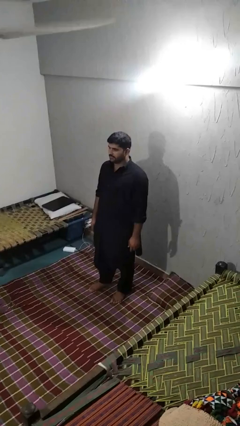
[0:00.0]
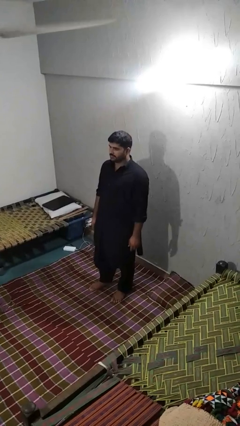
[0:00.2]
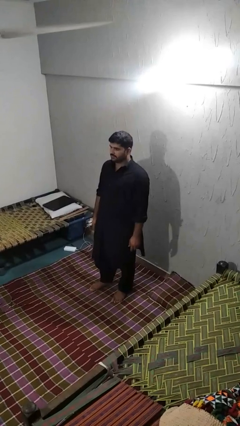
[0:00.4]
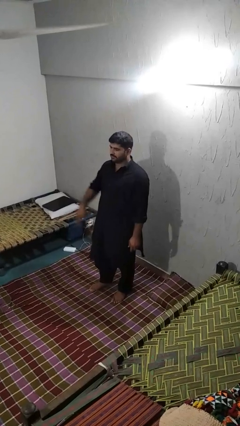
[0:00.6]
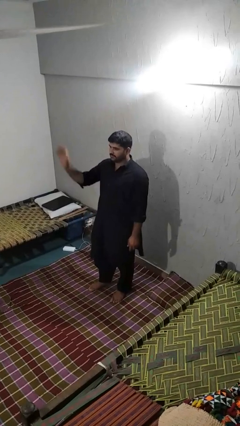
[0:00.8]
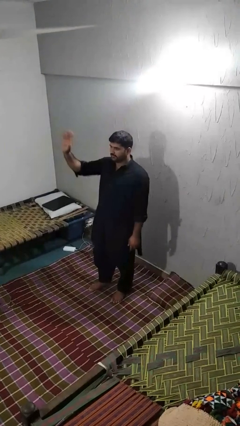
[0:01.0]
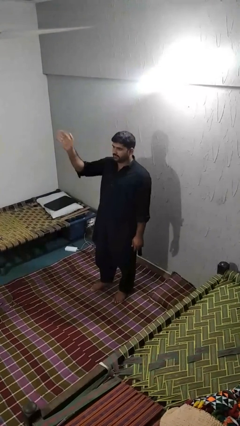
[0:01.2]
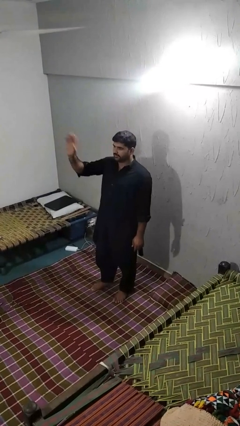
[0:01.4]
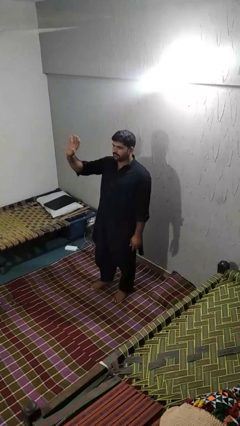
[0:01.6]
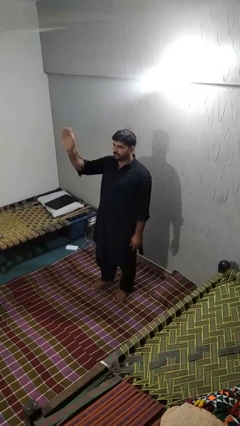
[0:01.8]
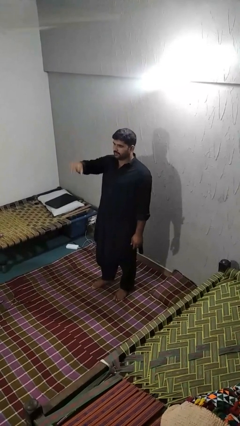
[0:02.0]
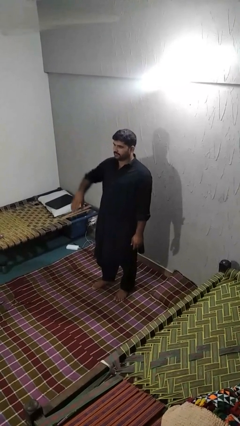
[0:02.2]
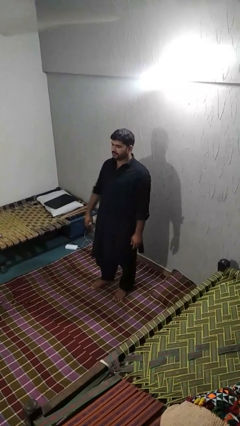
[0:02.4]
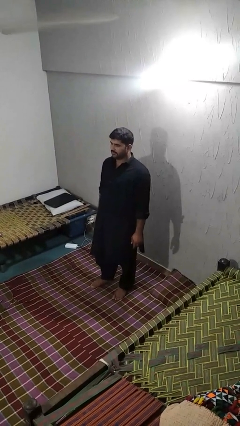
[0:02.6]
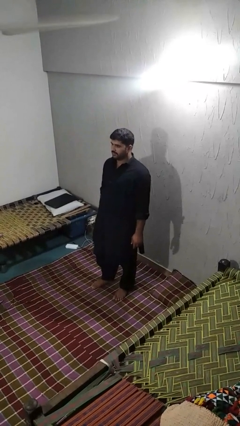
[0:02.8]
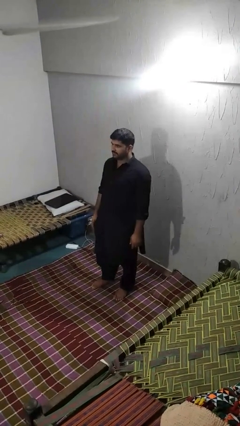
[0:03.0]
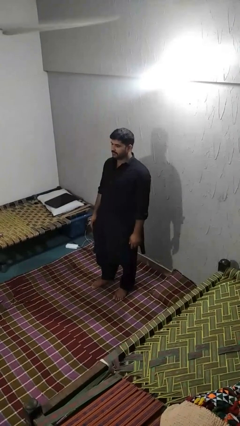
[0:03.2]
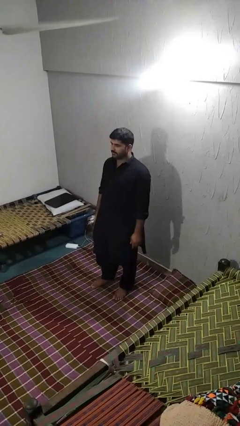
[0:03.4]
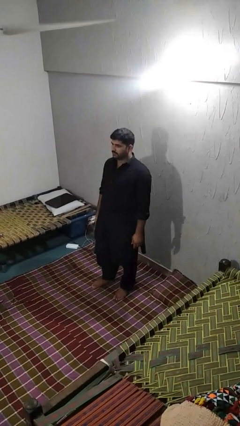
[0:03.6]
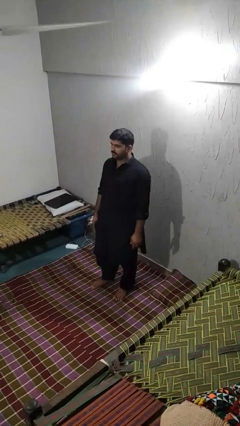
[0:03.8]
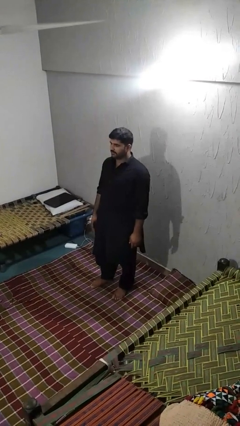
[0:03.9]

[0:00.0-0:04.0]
person waves at person

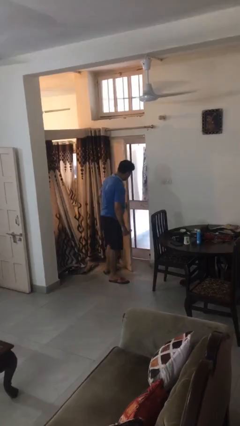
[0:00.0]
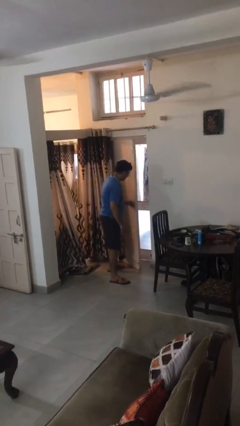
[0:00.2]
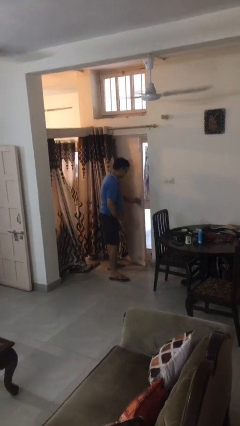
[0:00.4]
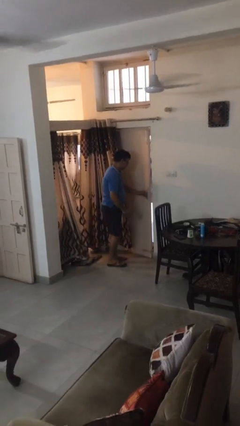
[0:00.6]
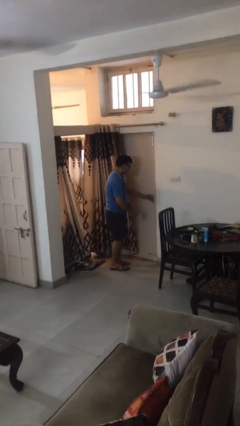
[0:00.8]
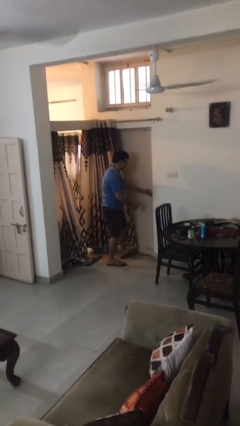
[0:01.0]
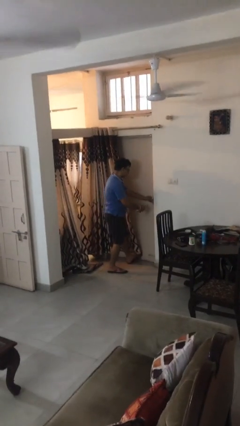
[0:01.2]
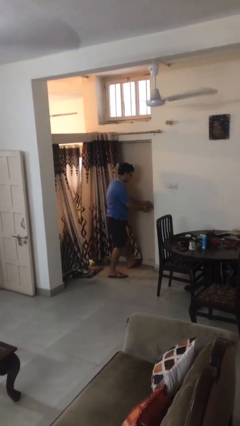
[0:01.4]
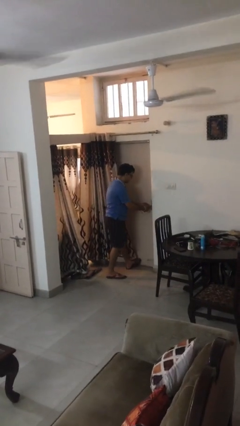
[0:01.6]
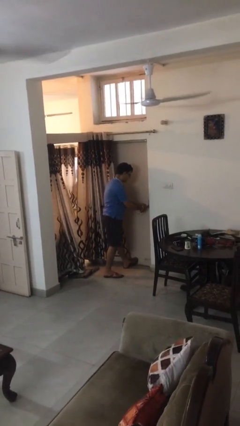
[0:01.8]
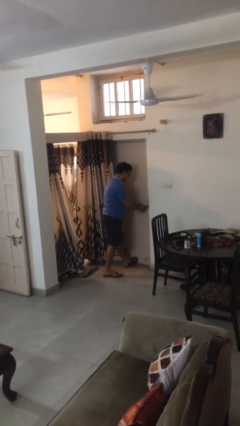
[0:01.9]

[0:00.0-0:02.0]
person closes facility door

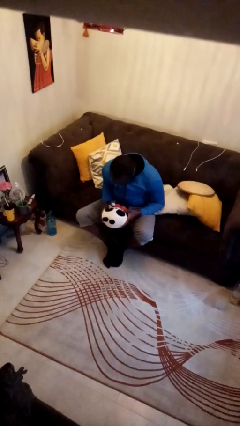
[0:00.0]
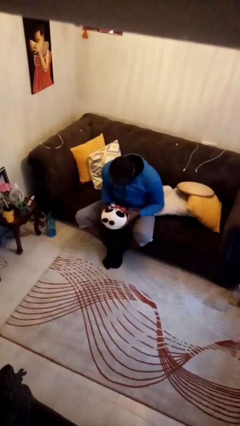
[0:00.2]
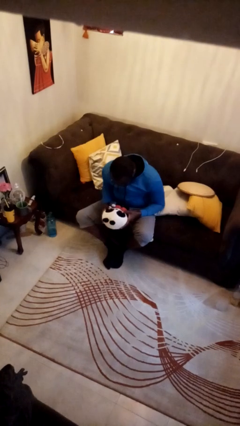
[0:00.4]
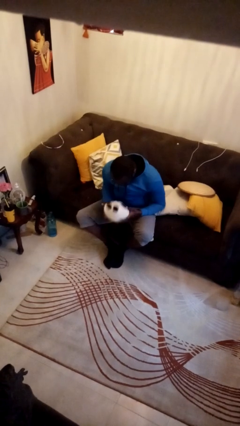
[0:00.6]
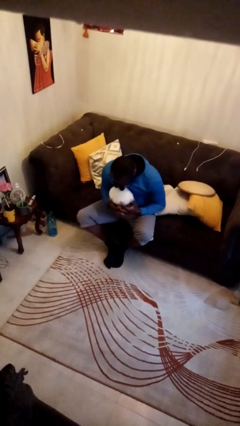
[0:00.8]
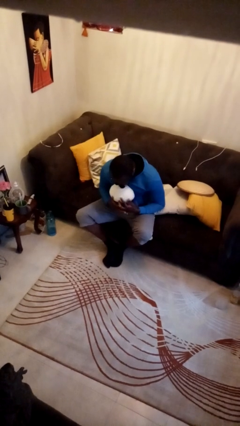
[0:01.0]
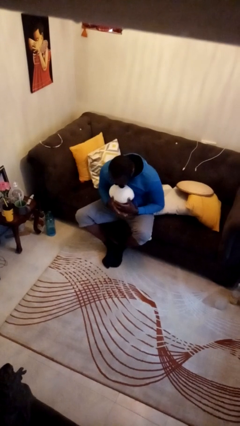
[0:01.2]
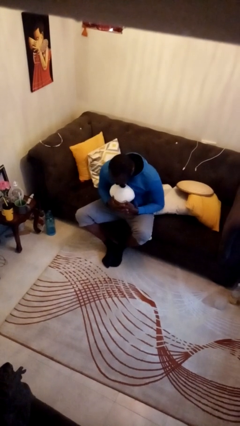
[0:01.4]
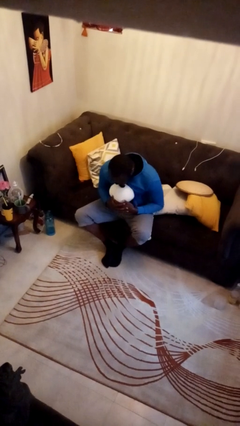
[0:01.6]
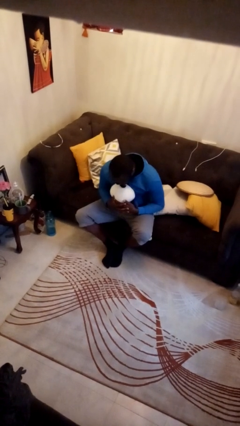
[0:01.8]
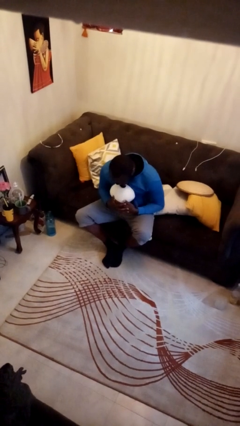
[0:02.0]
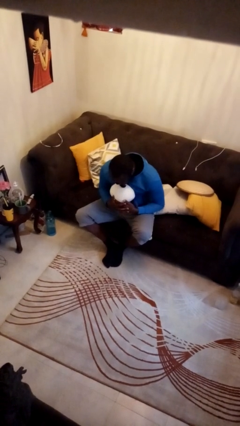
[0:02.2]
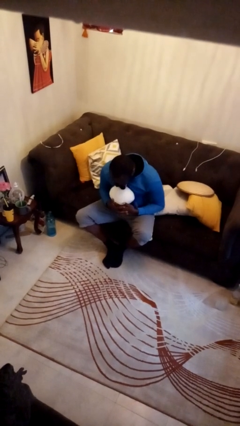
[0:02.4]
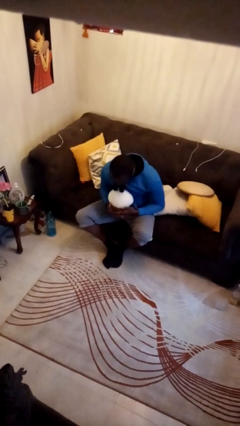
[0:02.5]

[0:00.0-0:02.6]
person hugs stuffed animal

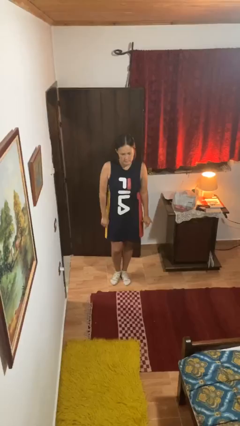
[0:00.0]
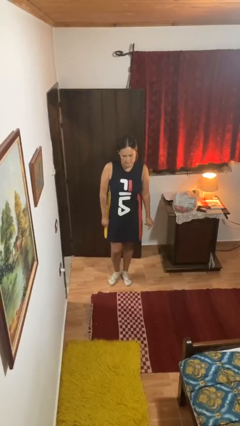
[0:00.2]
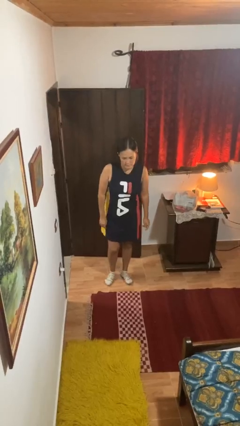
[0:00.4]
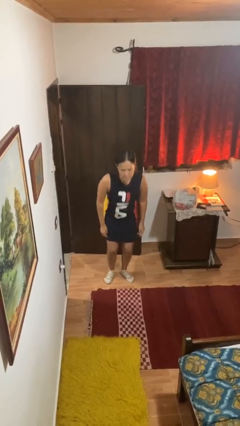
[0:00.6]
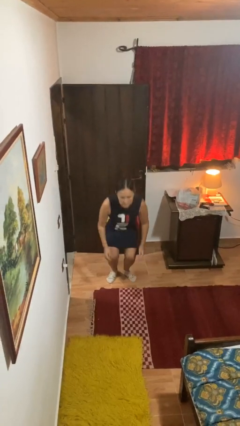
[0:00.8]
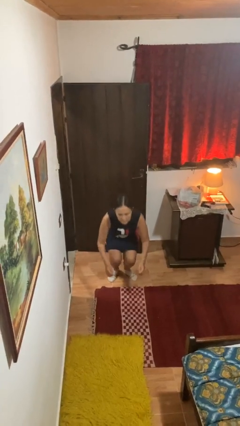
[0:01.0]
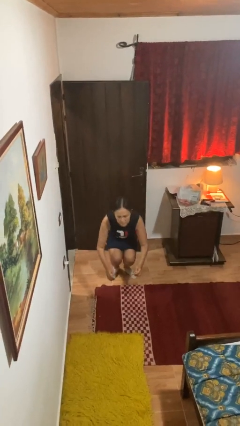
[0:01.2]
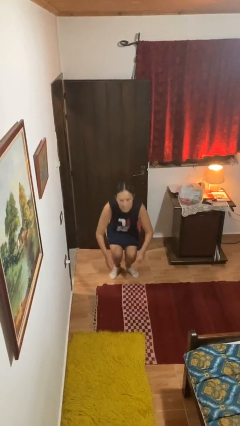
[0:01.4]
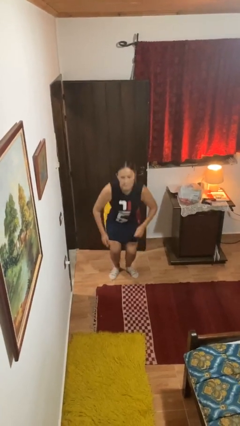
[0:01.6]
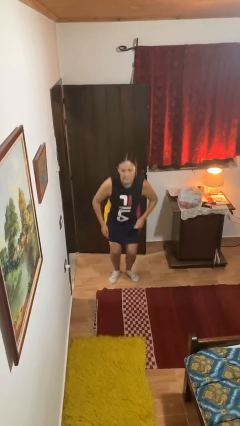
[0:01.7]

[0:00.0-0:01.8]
person squats

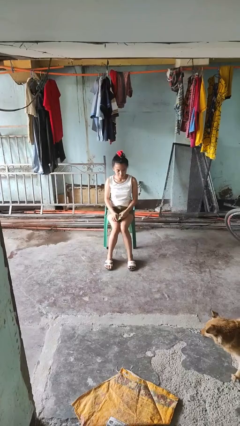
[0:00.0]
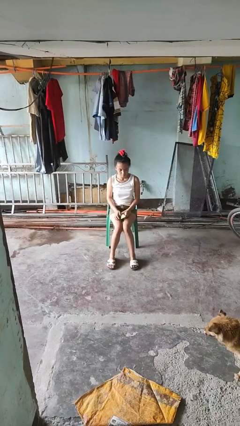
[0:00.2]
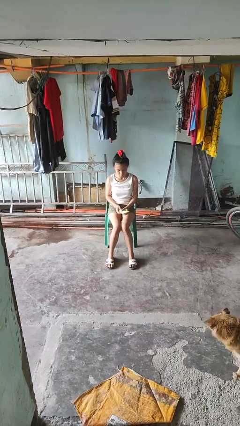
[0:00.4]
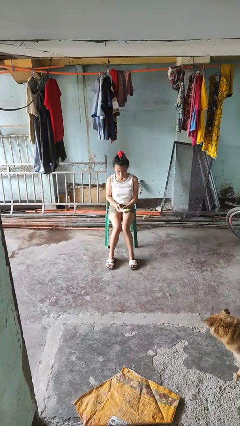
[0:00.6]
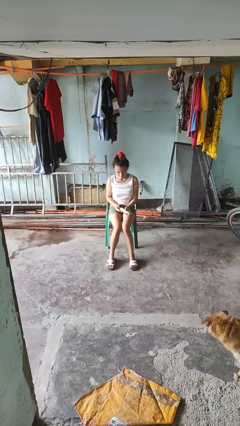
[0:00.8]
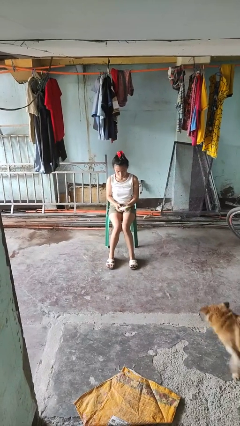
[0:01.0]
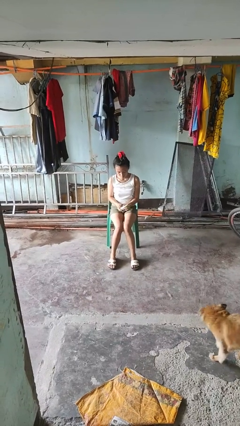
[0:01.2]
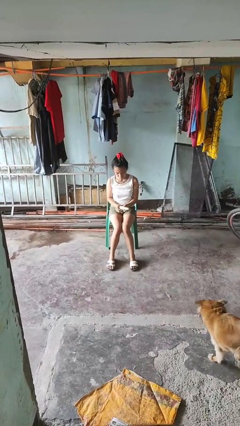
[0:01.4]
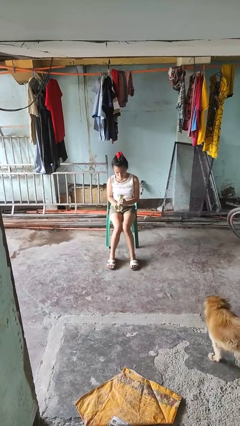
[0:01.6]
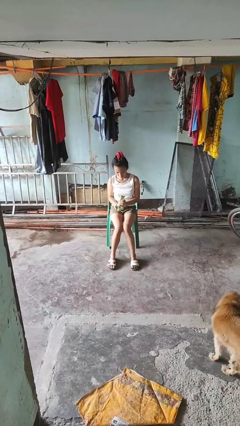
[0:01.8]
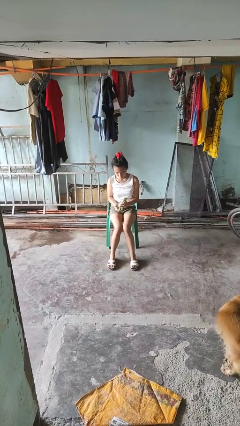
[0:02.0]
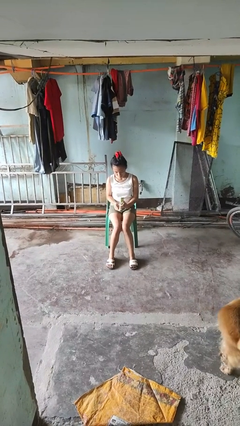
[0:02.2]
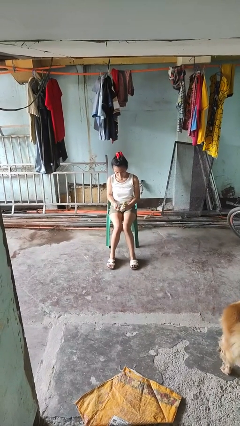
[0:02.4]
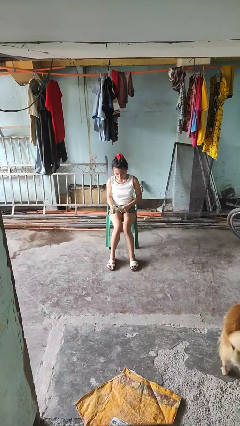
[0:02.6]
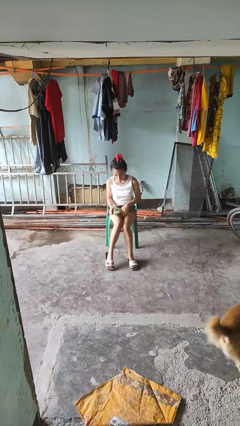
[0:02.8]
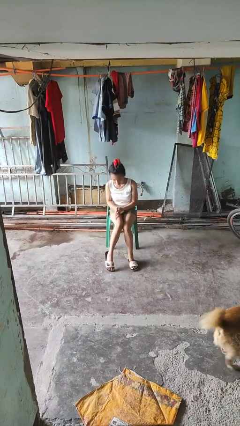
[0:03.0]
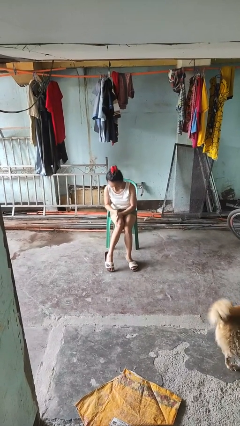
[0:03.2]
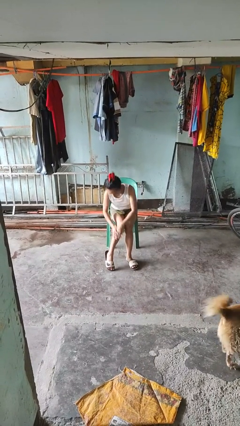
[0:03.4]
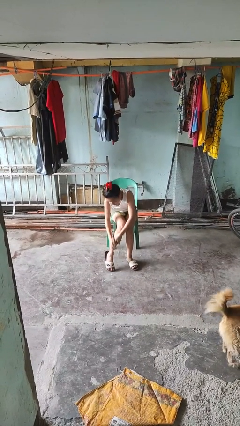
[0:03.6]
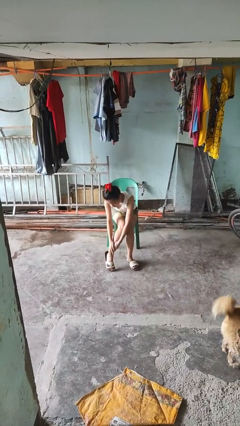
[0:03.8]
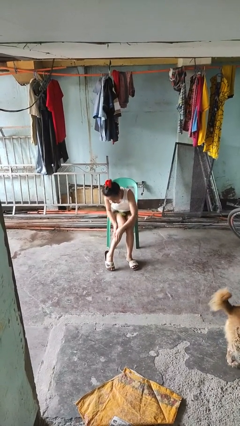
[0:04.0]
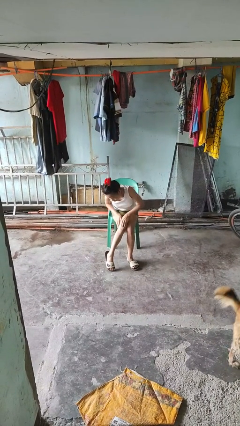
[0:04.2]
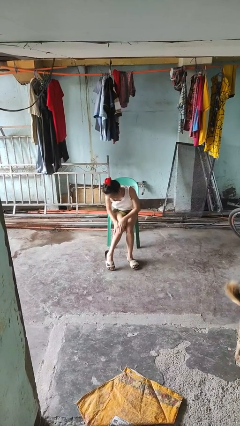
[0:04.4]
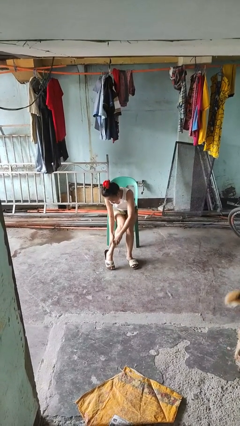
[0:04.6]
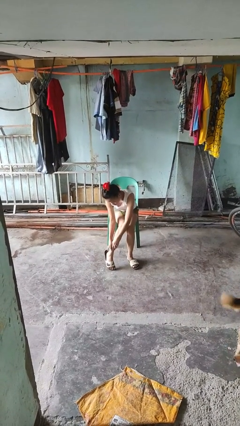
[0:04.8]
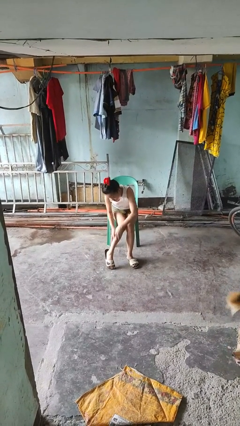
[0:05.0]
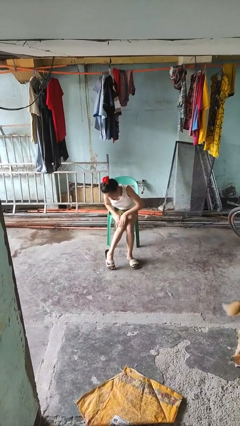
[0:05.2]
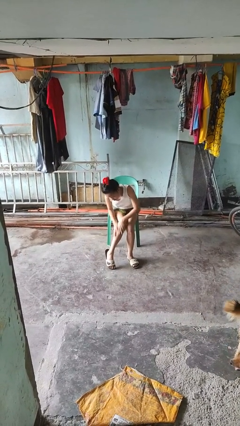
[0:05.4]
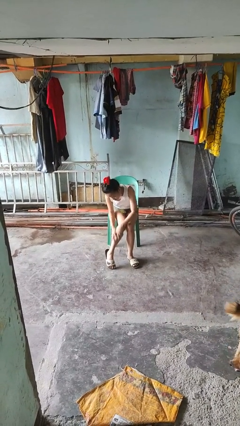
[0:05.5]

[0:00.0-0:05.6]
person applies sunscreen

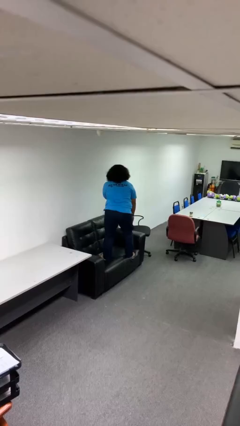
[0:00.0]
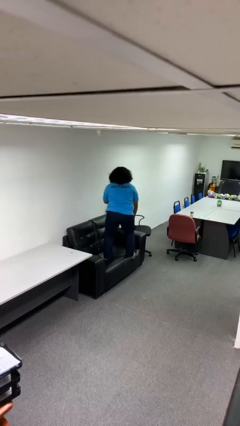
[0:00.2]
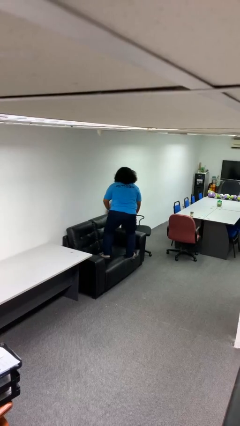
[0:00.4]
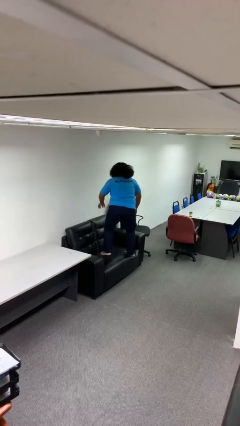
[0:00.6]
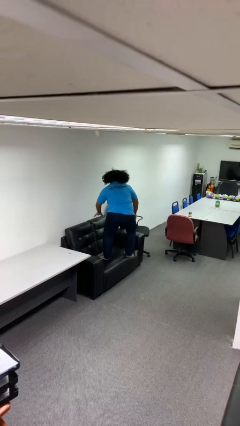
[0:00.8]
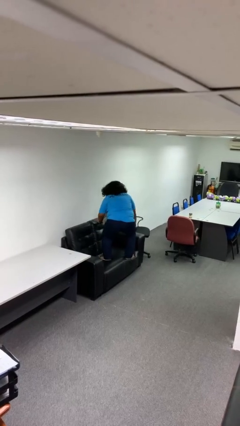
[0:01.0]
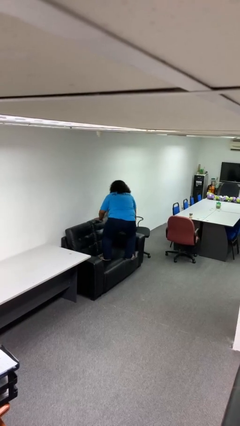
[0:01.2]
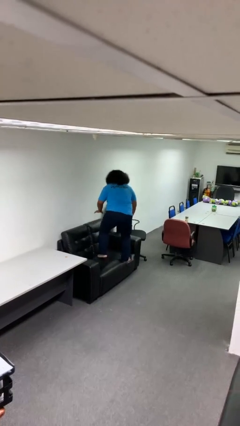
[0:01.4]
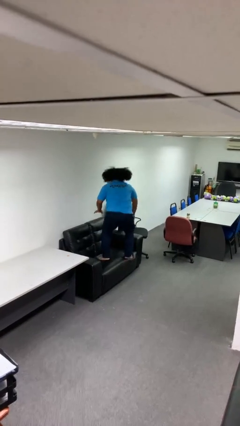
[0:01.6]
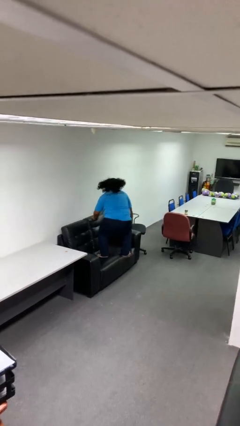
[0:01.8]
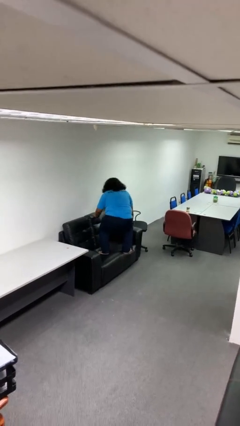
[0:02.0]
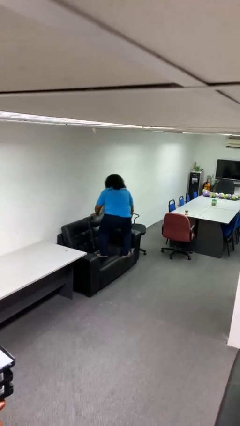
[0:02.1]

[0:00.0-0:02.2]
person jumps on couch
